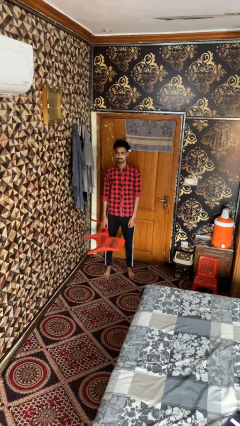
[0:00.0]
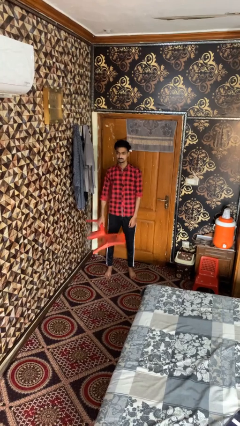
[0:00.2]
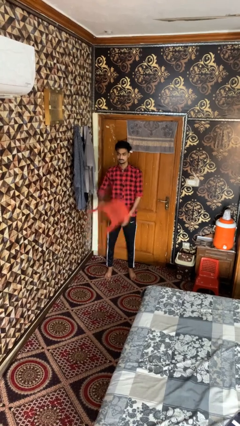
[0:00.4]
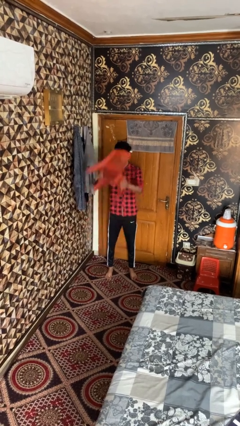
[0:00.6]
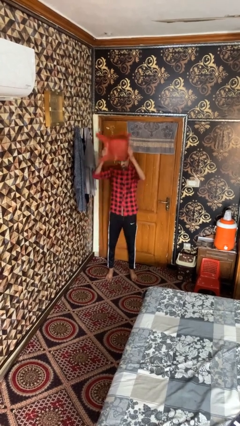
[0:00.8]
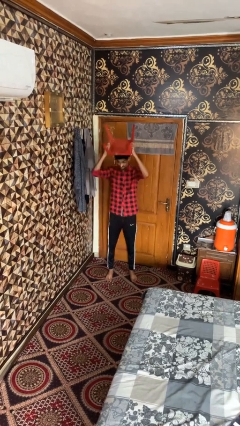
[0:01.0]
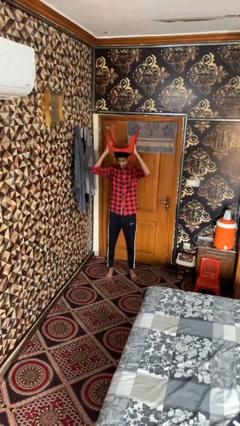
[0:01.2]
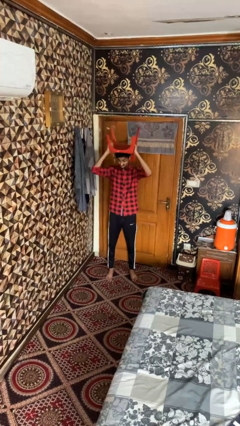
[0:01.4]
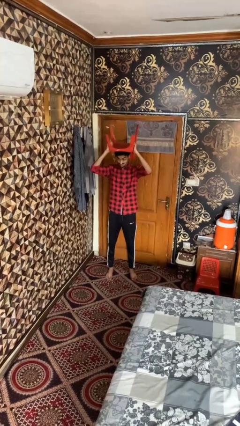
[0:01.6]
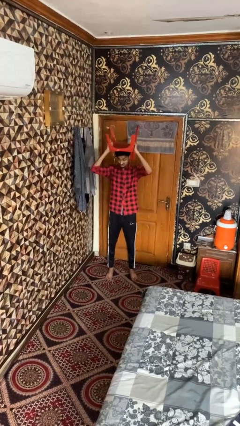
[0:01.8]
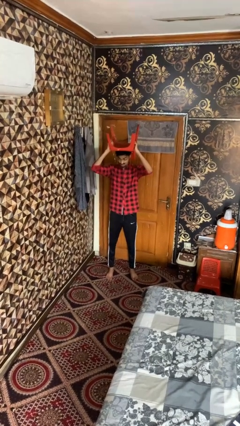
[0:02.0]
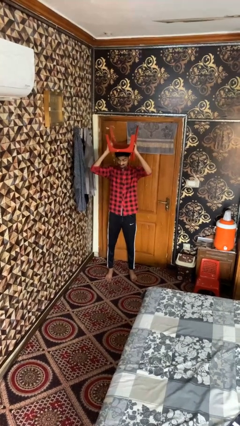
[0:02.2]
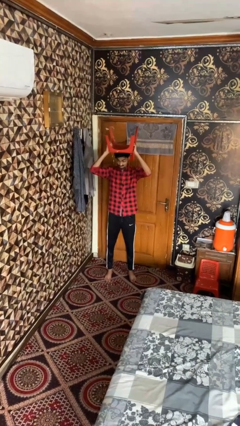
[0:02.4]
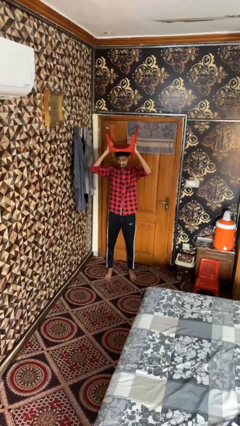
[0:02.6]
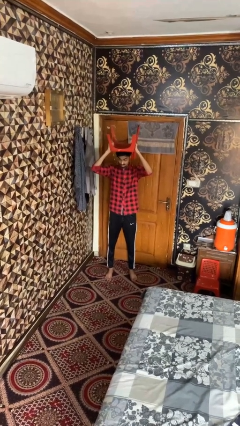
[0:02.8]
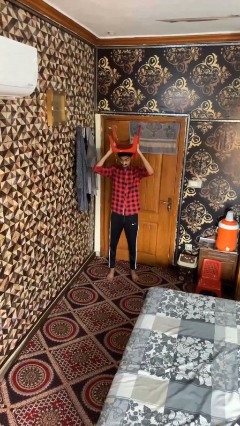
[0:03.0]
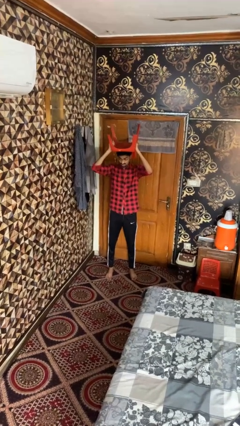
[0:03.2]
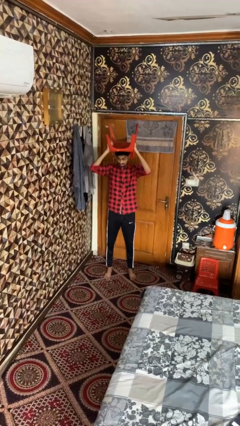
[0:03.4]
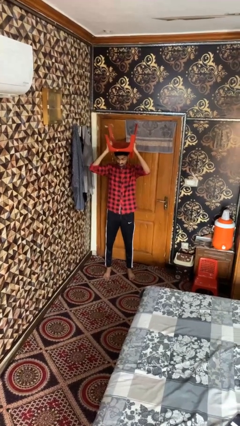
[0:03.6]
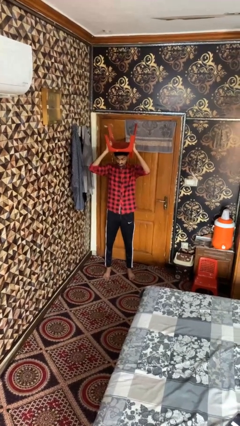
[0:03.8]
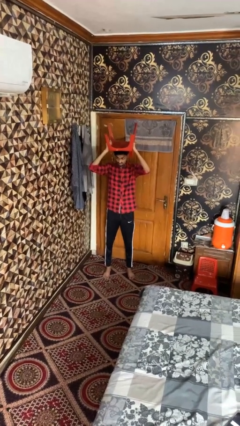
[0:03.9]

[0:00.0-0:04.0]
person holds object above head

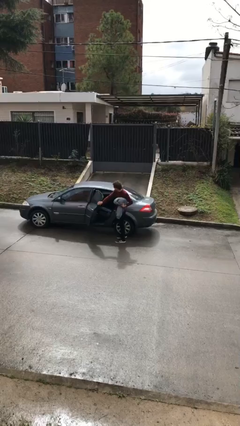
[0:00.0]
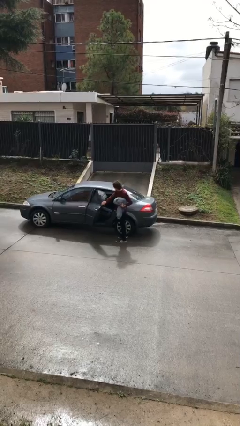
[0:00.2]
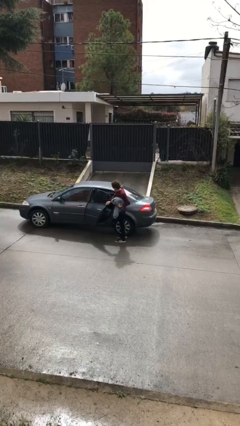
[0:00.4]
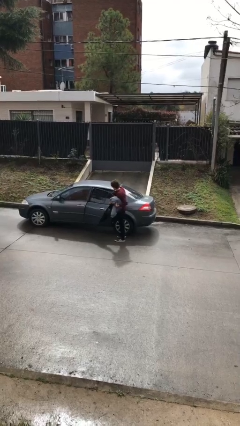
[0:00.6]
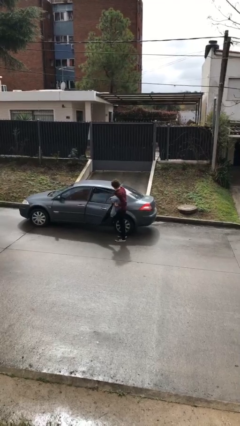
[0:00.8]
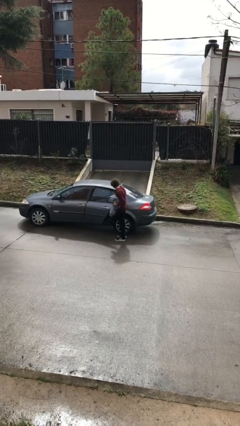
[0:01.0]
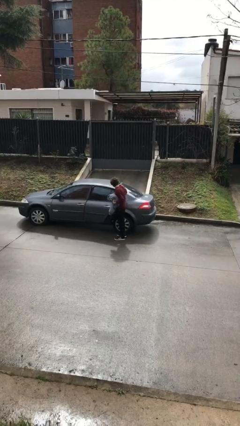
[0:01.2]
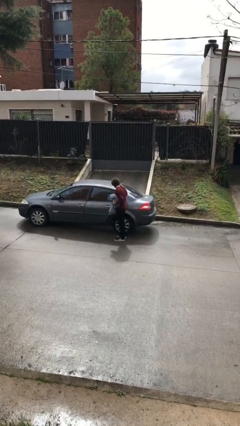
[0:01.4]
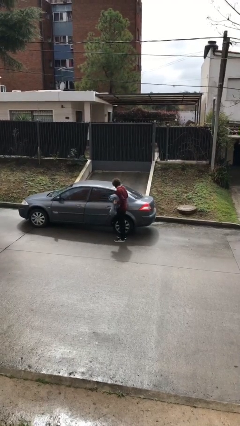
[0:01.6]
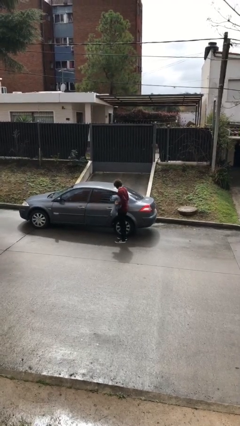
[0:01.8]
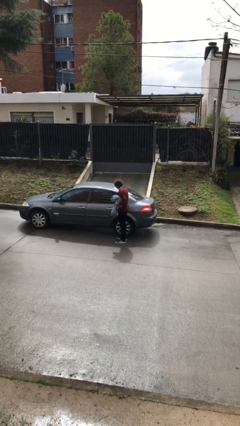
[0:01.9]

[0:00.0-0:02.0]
person closes car door

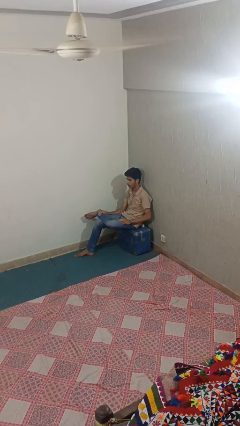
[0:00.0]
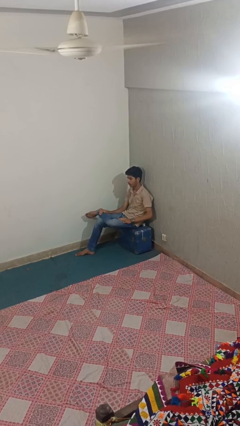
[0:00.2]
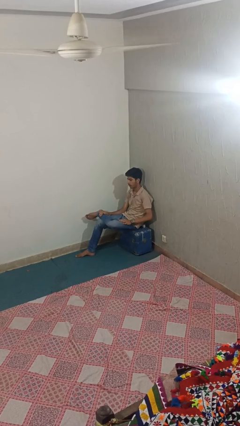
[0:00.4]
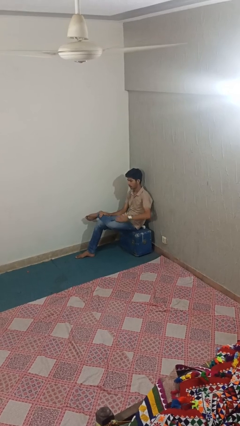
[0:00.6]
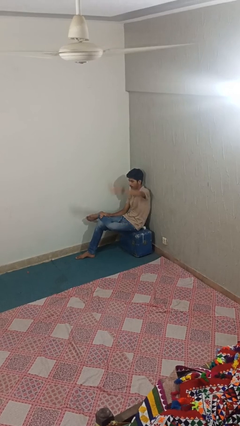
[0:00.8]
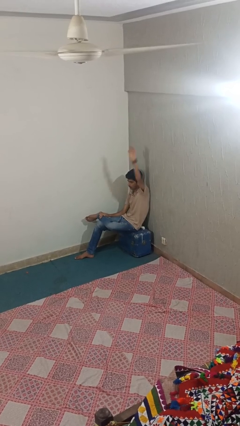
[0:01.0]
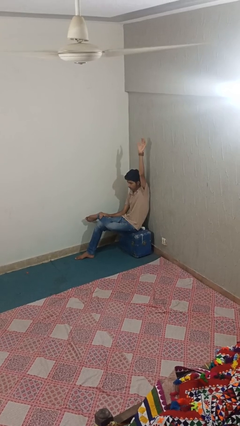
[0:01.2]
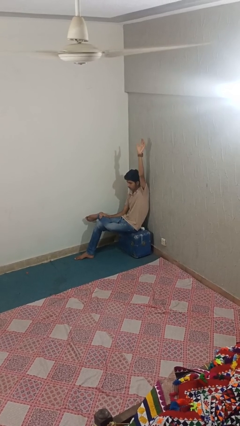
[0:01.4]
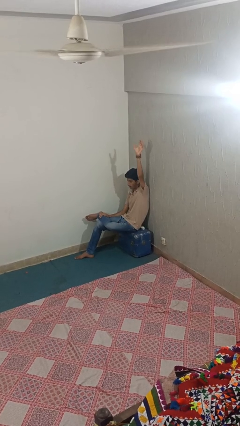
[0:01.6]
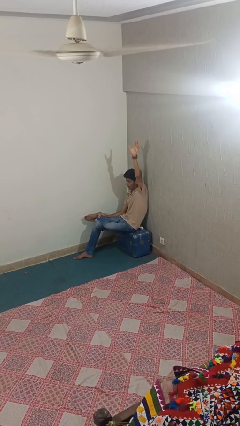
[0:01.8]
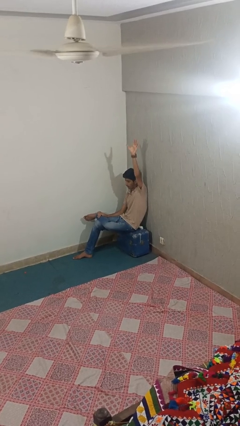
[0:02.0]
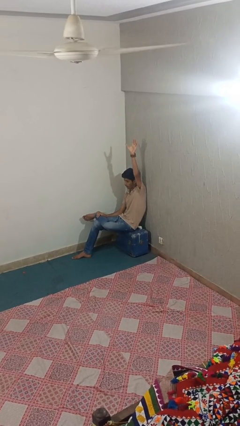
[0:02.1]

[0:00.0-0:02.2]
person gestures raise hand

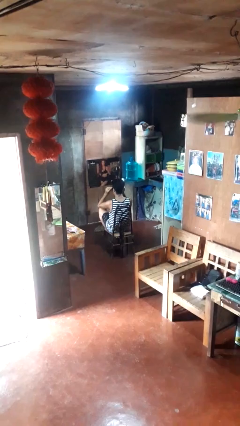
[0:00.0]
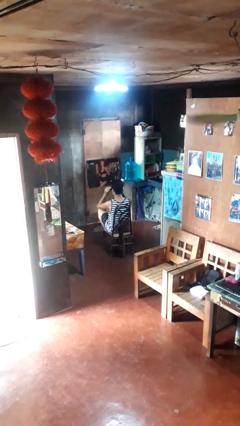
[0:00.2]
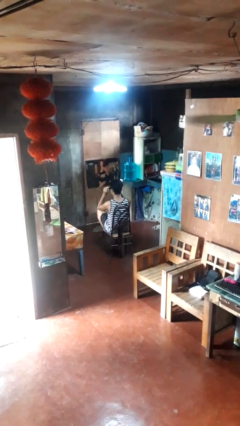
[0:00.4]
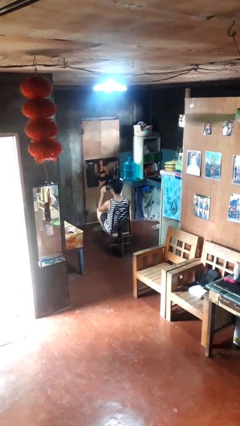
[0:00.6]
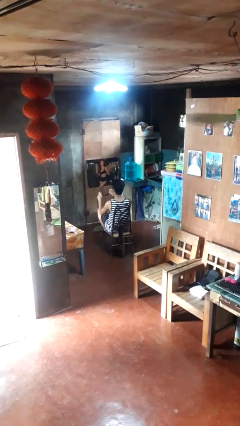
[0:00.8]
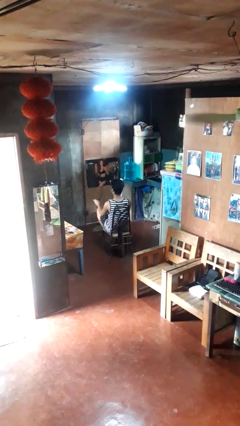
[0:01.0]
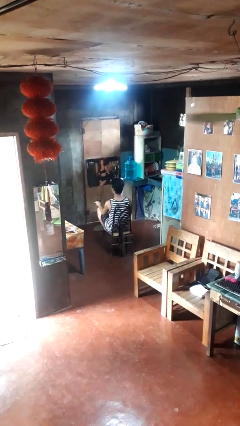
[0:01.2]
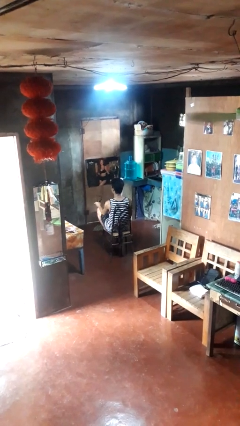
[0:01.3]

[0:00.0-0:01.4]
person takes off sunglasses

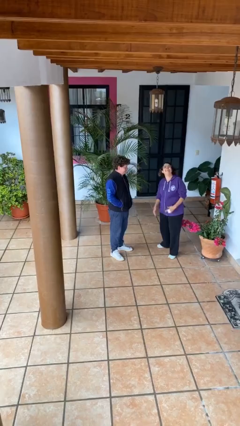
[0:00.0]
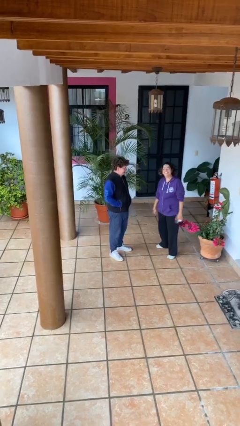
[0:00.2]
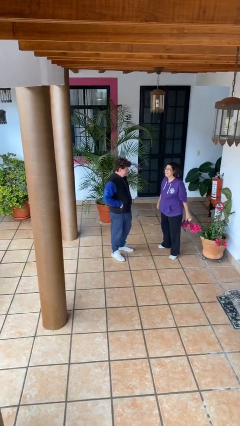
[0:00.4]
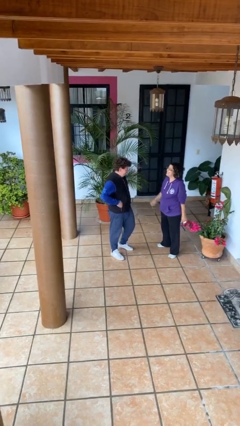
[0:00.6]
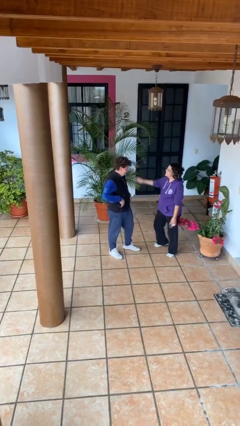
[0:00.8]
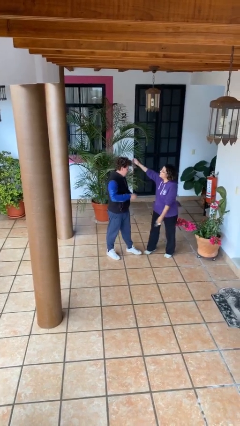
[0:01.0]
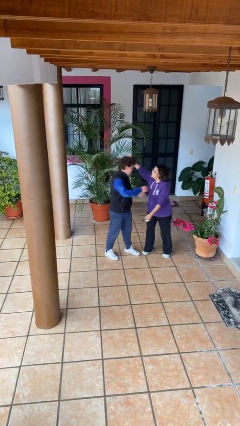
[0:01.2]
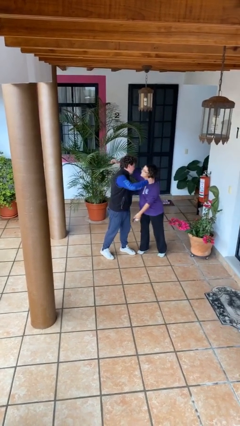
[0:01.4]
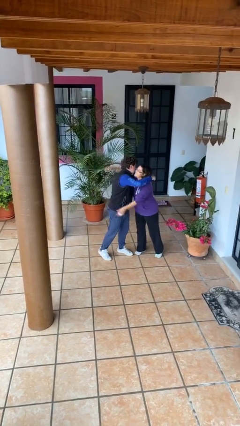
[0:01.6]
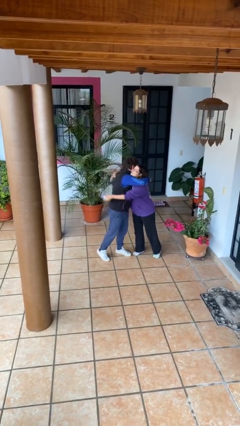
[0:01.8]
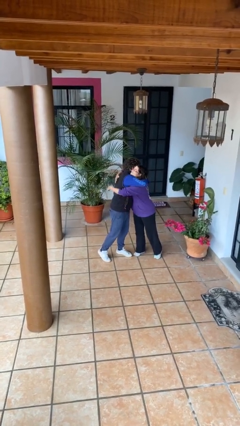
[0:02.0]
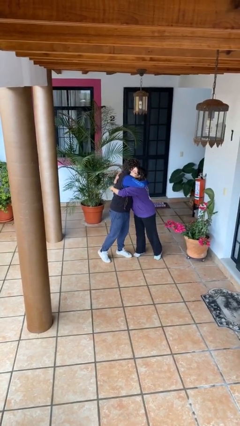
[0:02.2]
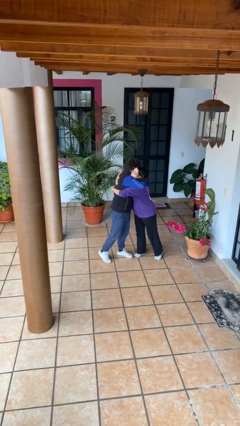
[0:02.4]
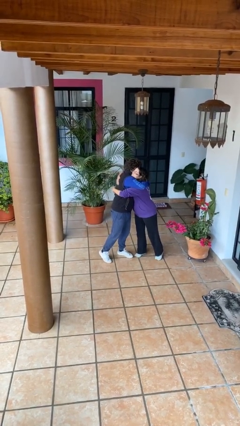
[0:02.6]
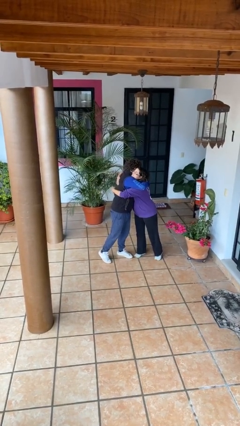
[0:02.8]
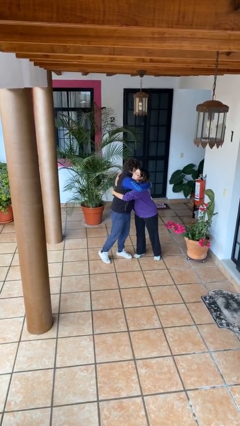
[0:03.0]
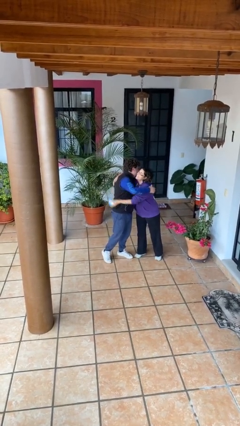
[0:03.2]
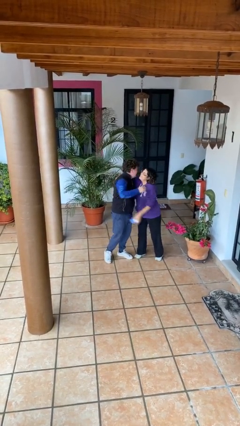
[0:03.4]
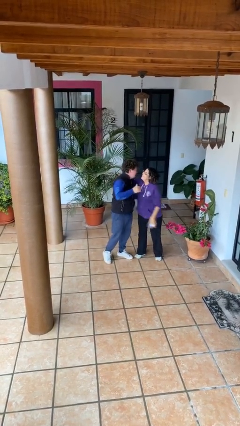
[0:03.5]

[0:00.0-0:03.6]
person embraces person

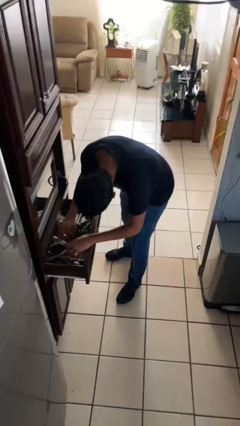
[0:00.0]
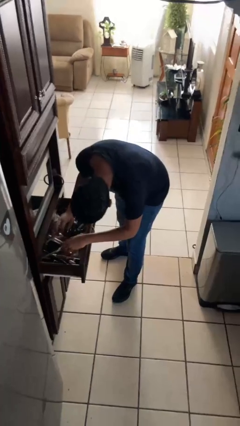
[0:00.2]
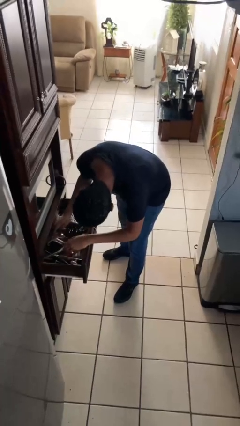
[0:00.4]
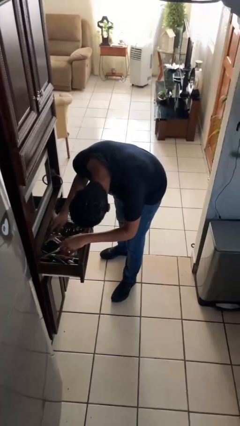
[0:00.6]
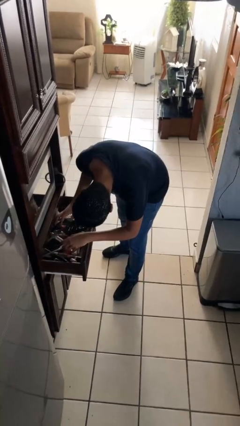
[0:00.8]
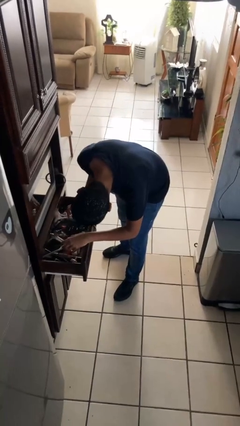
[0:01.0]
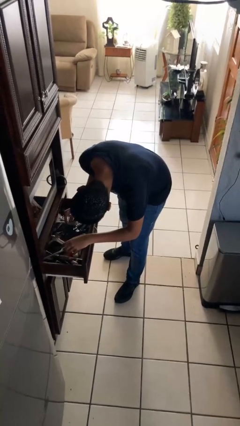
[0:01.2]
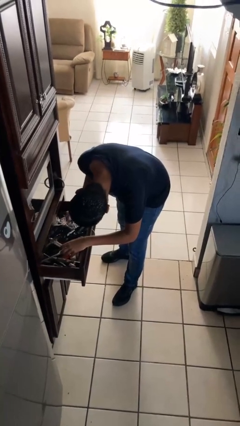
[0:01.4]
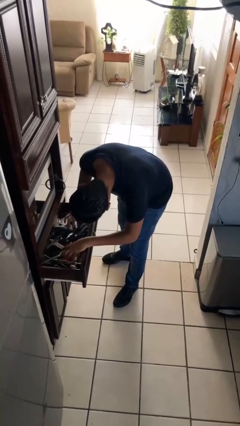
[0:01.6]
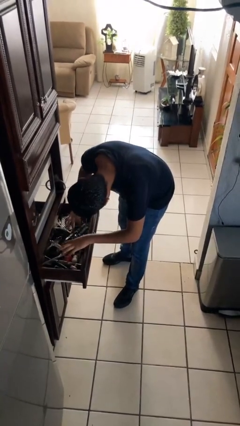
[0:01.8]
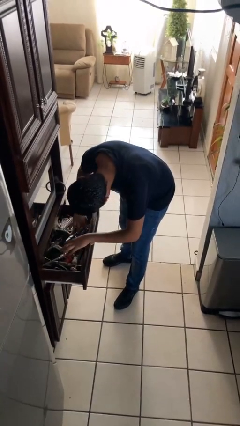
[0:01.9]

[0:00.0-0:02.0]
person searches in kitchen drawer

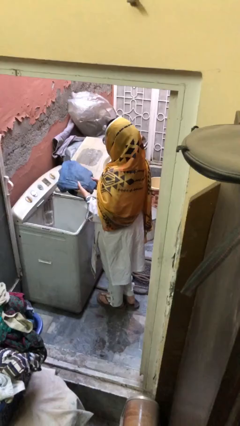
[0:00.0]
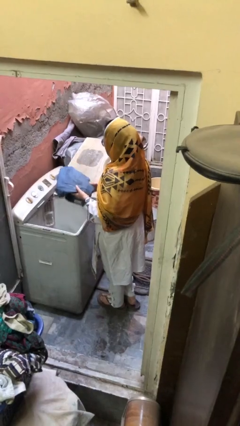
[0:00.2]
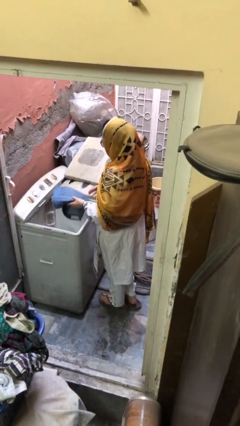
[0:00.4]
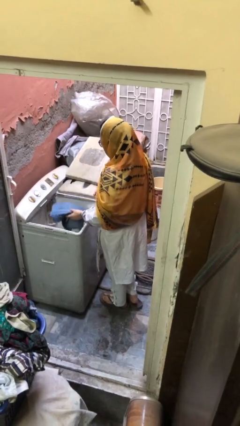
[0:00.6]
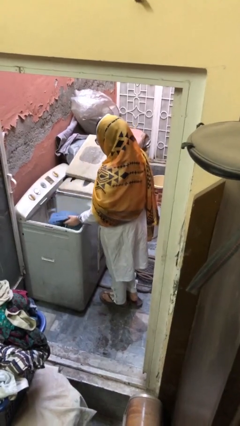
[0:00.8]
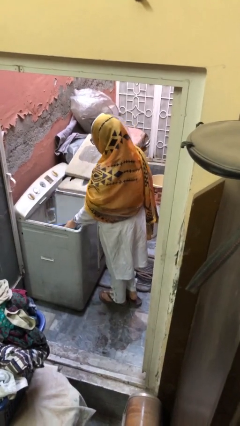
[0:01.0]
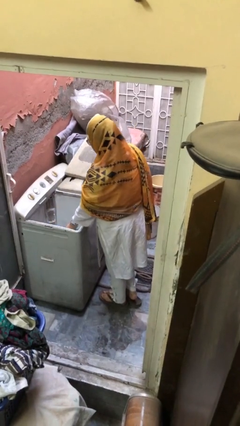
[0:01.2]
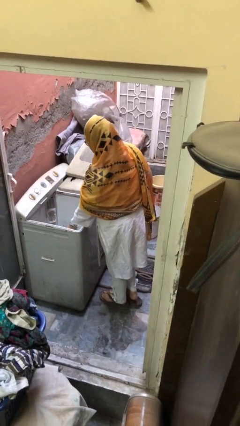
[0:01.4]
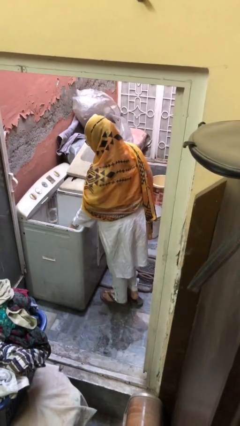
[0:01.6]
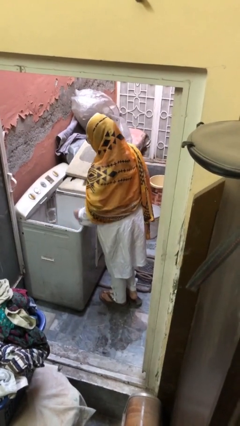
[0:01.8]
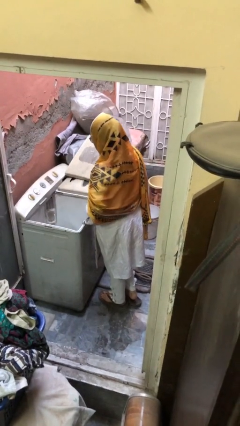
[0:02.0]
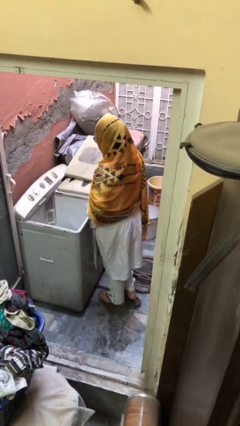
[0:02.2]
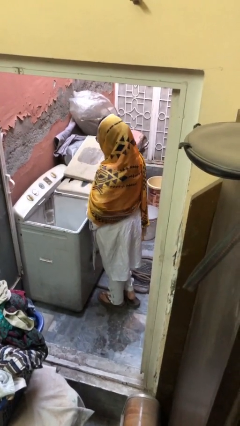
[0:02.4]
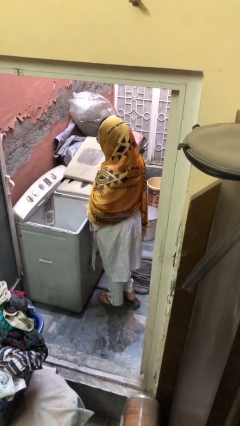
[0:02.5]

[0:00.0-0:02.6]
person loads clotheswasher
